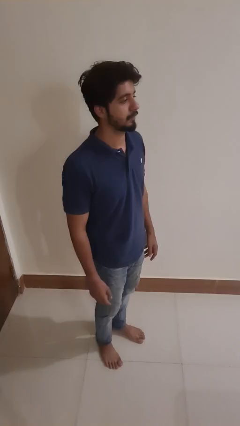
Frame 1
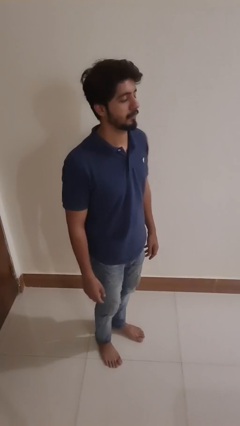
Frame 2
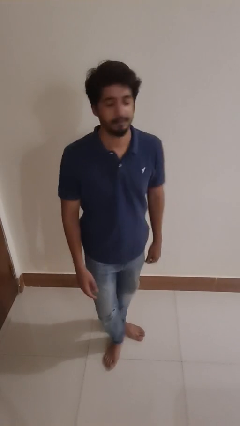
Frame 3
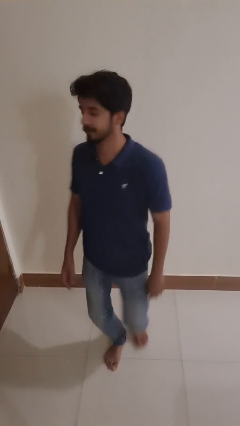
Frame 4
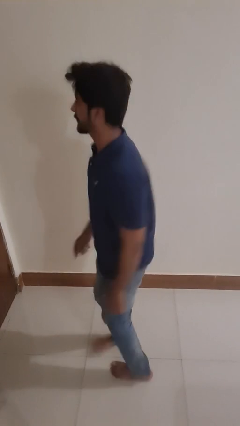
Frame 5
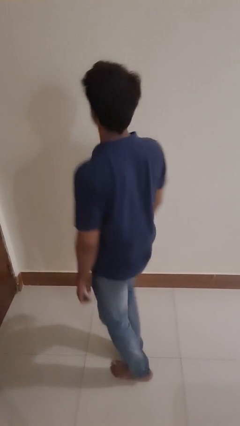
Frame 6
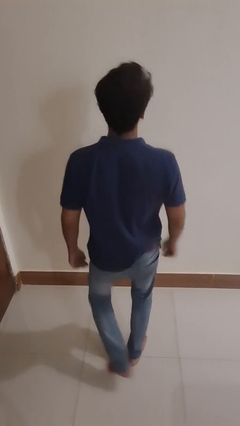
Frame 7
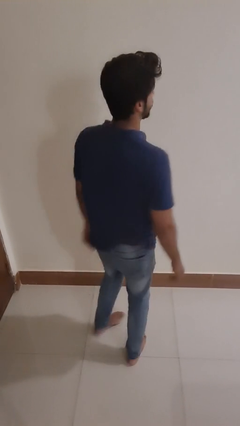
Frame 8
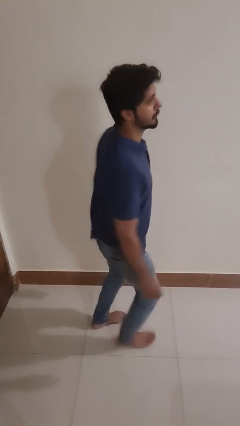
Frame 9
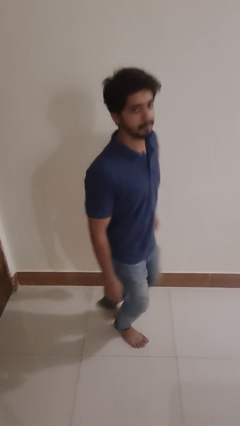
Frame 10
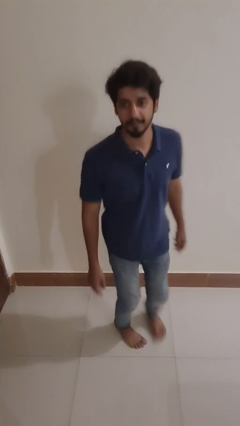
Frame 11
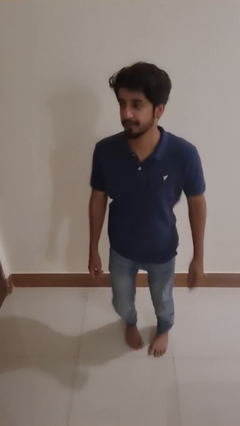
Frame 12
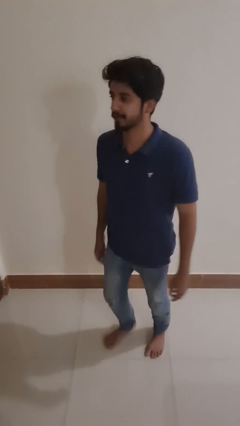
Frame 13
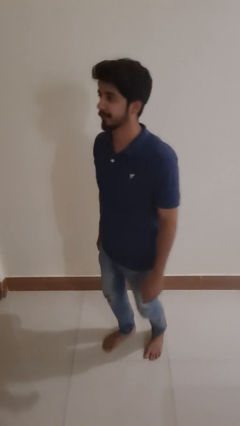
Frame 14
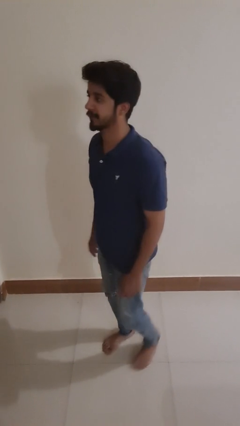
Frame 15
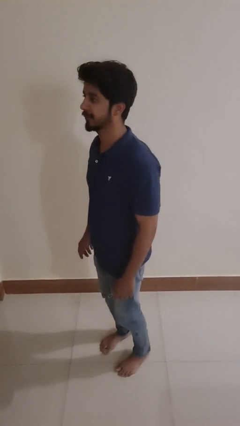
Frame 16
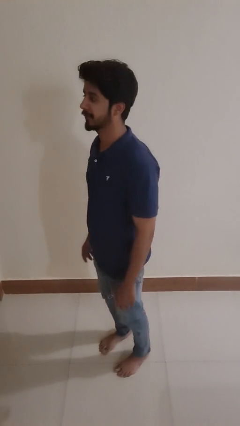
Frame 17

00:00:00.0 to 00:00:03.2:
person twirls

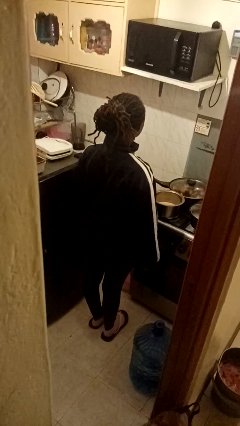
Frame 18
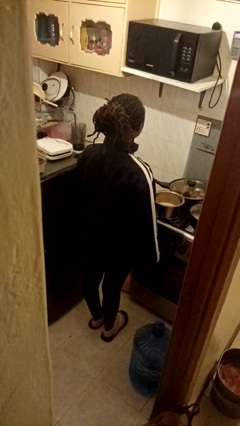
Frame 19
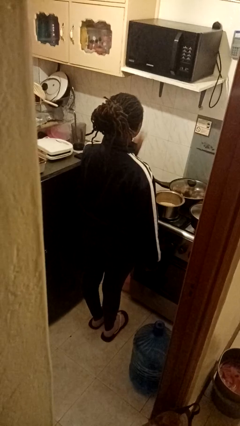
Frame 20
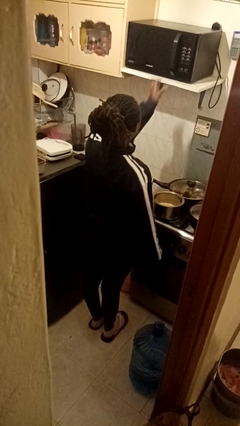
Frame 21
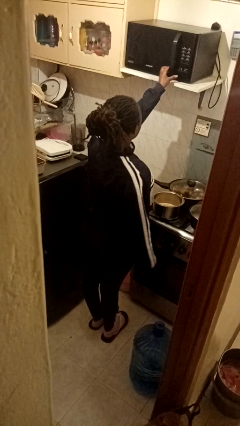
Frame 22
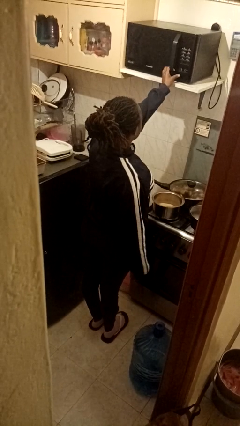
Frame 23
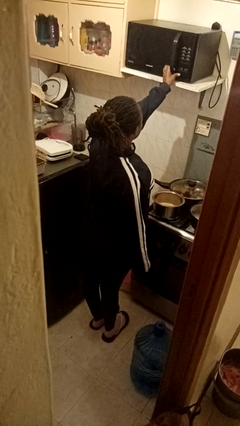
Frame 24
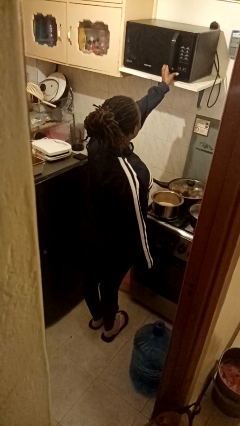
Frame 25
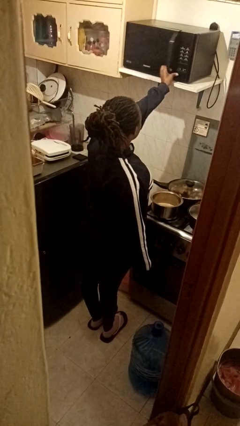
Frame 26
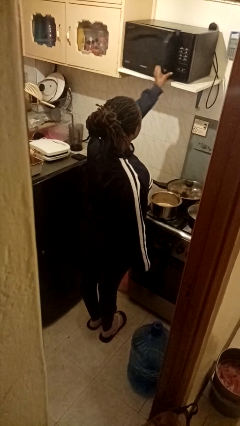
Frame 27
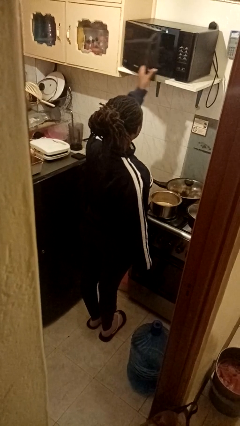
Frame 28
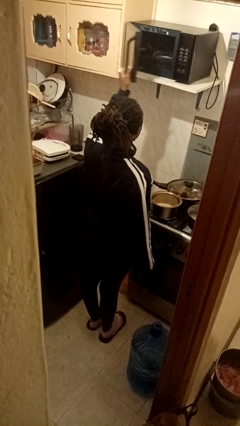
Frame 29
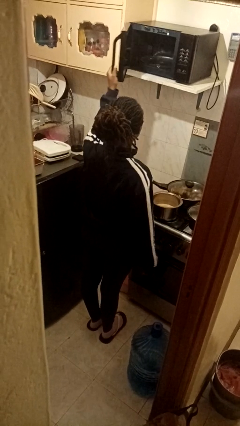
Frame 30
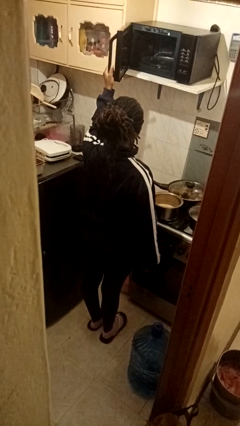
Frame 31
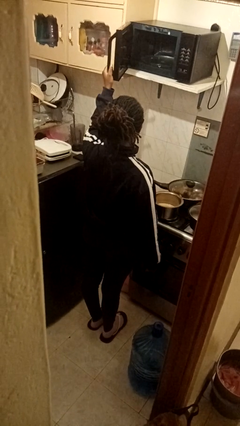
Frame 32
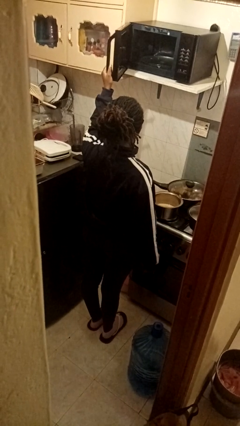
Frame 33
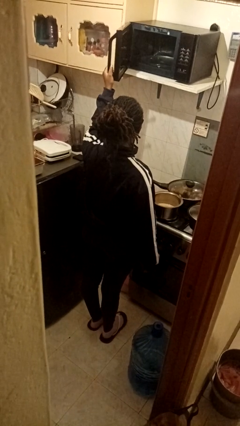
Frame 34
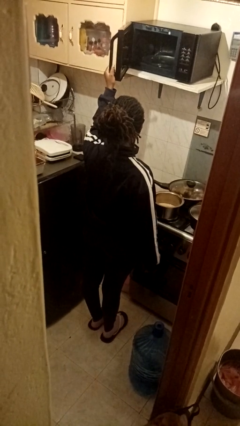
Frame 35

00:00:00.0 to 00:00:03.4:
person opens microwave

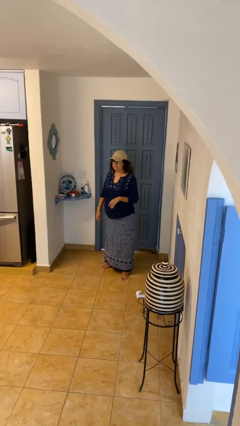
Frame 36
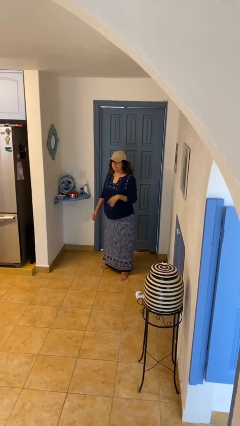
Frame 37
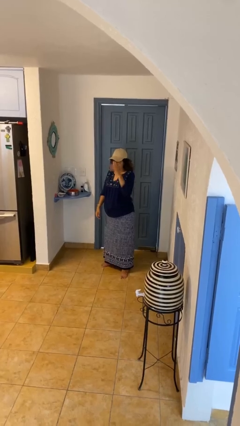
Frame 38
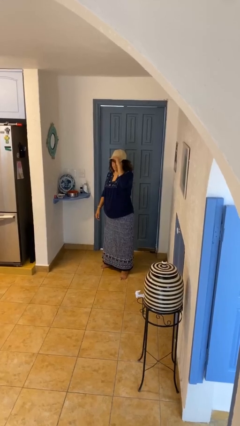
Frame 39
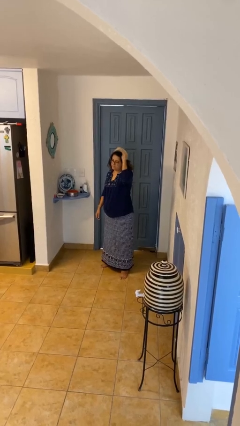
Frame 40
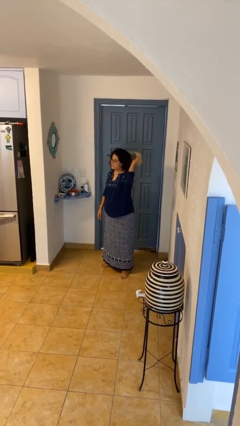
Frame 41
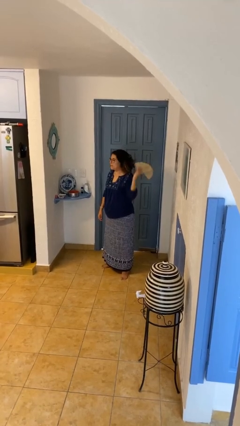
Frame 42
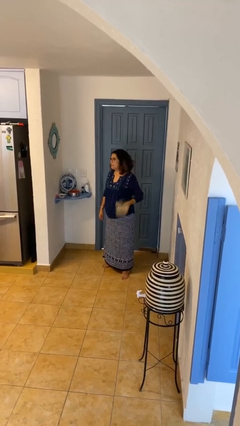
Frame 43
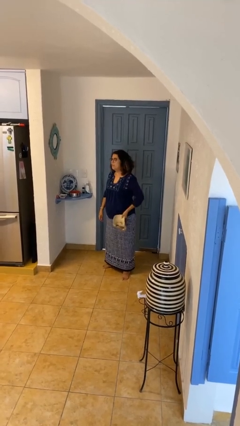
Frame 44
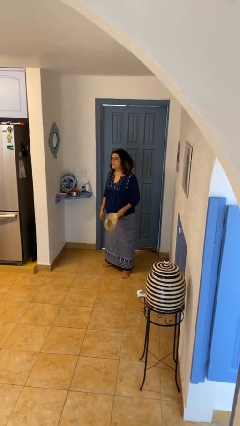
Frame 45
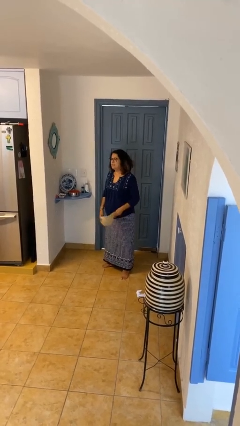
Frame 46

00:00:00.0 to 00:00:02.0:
person takes off hat

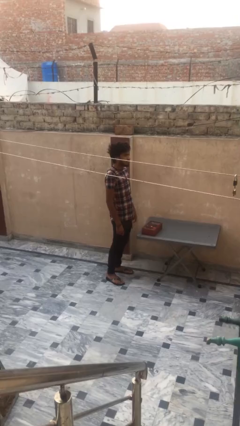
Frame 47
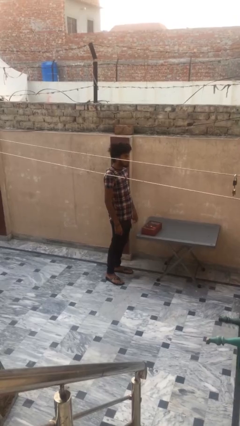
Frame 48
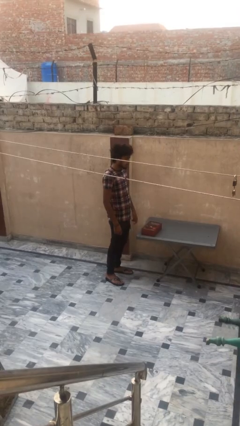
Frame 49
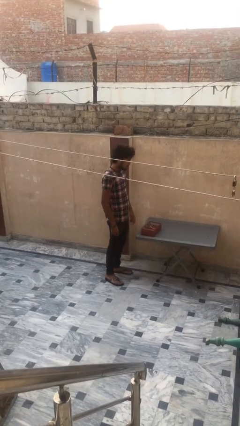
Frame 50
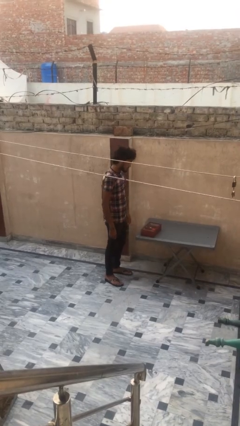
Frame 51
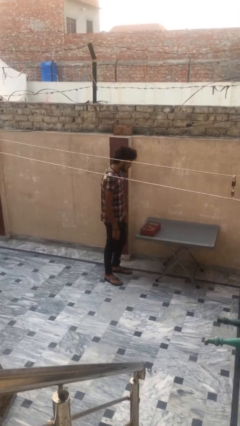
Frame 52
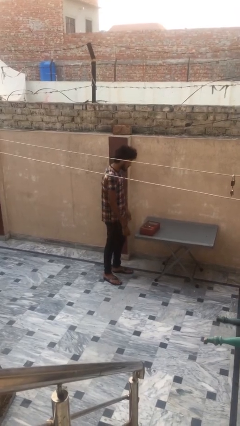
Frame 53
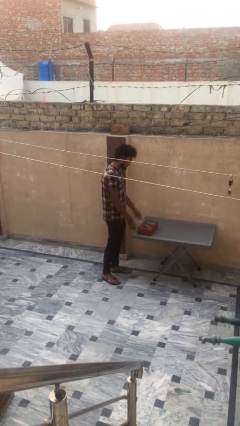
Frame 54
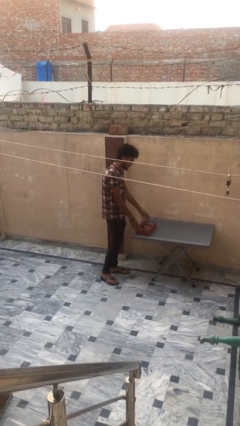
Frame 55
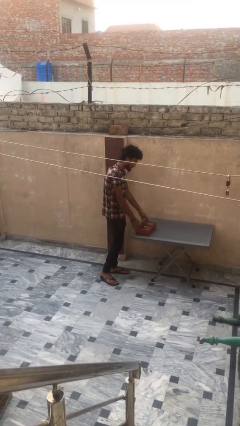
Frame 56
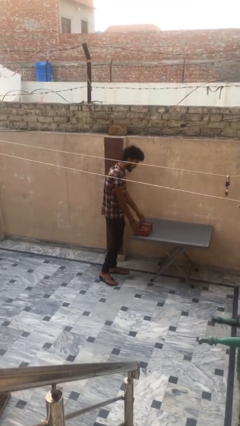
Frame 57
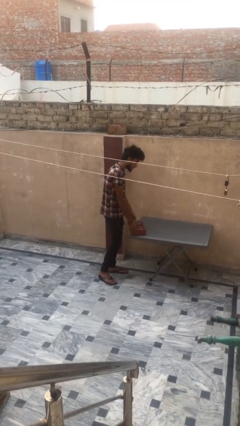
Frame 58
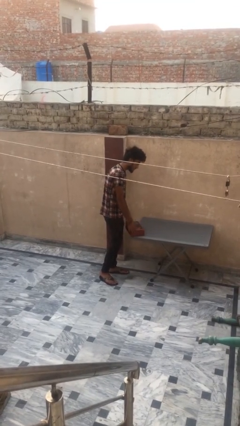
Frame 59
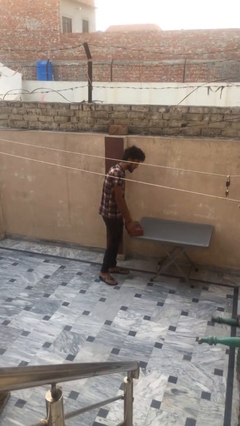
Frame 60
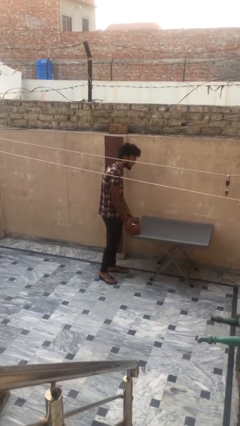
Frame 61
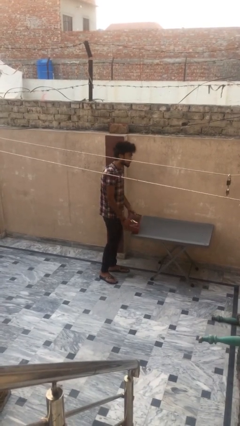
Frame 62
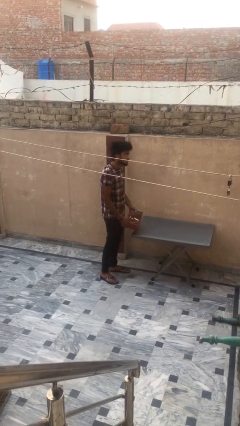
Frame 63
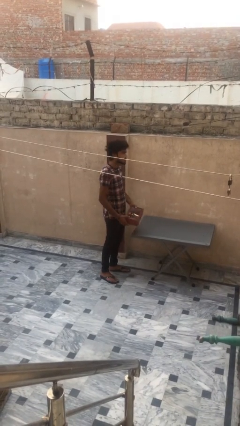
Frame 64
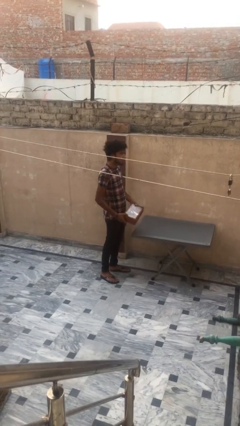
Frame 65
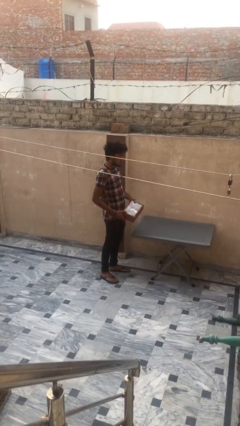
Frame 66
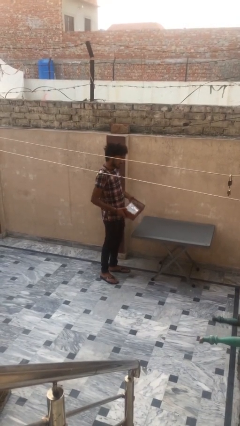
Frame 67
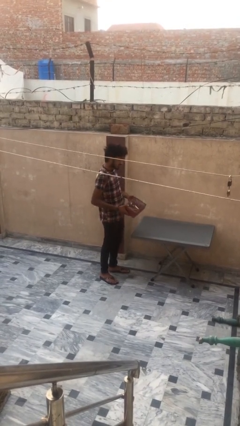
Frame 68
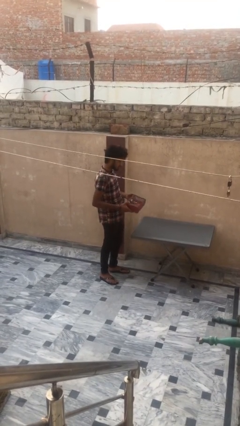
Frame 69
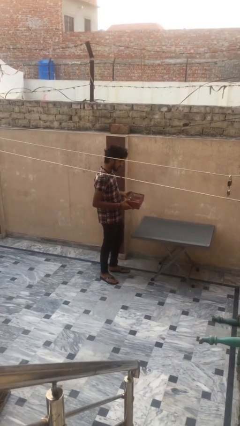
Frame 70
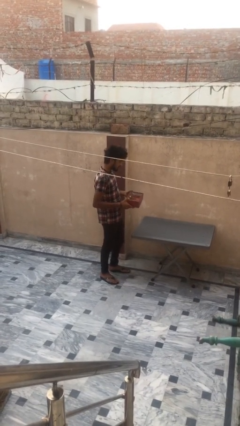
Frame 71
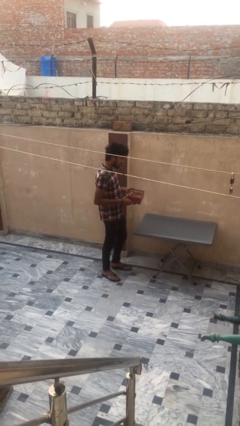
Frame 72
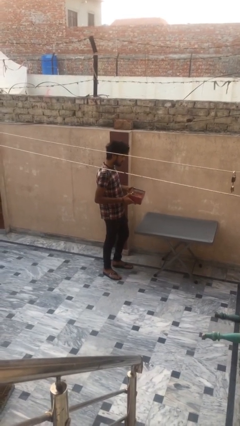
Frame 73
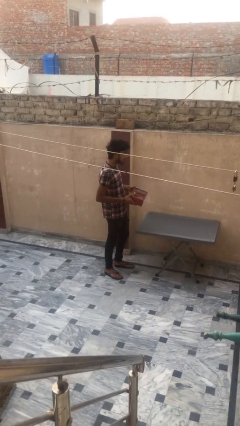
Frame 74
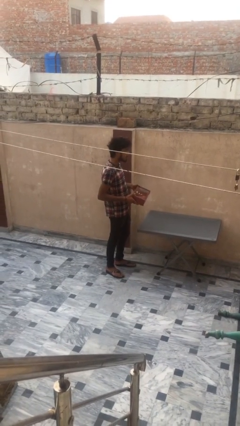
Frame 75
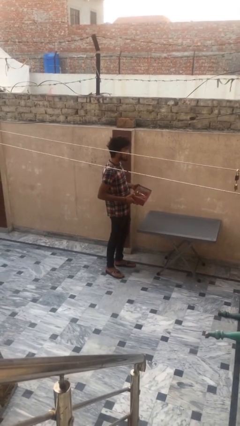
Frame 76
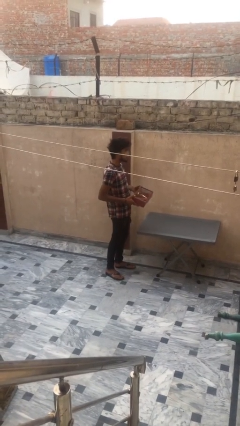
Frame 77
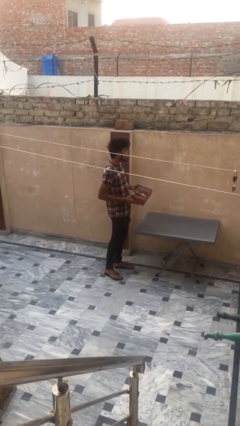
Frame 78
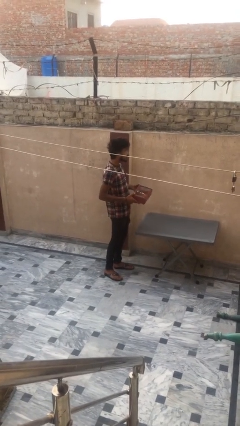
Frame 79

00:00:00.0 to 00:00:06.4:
person picks up object from table

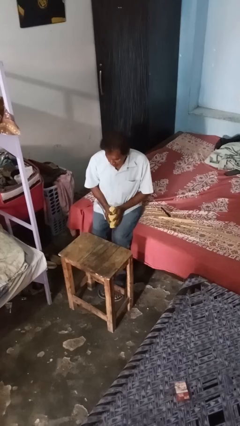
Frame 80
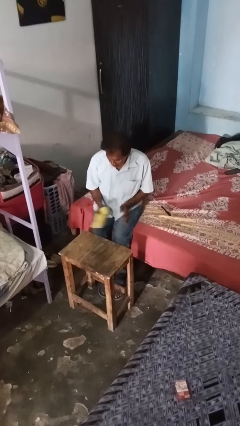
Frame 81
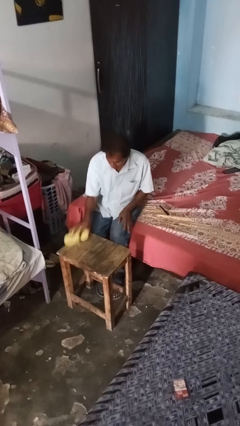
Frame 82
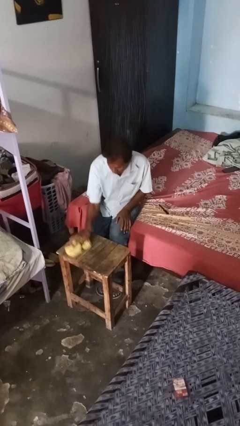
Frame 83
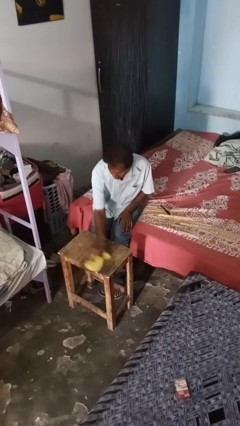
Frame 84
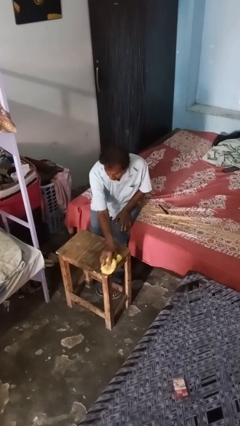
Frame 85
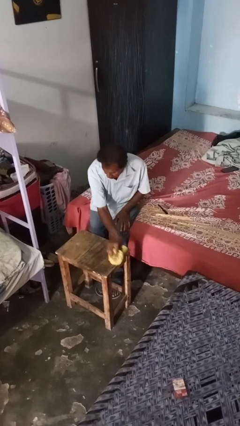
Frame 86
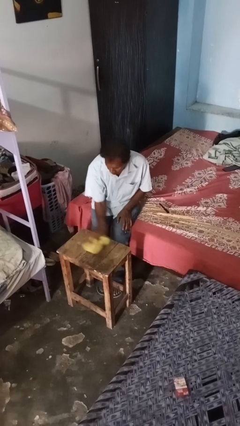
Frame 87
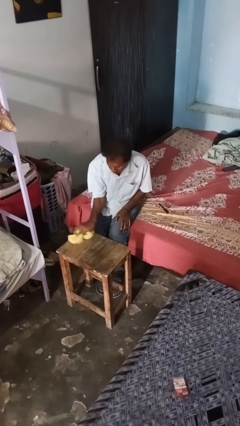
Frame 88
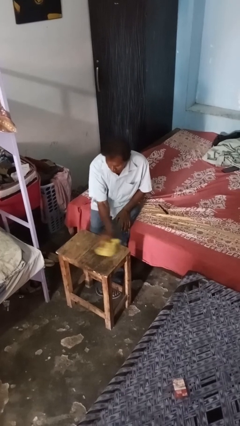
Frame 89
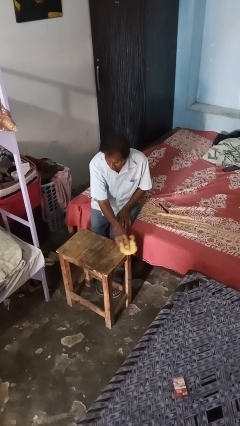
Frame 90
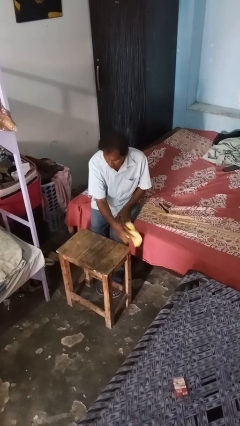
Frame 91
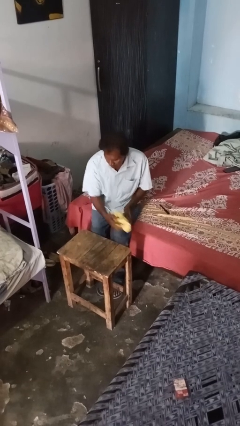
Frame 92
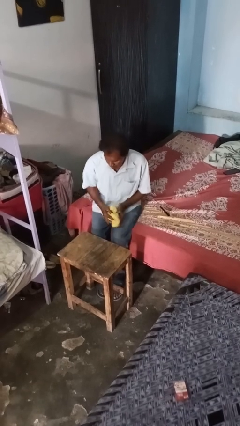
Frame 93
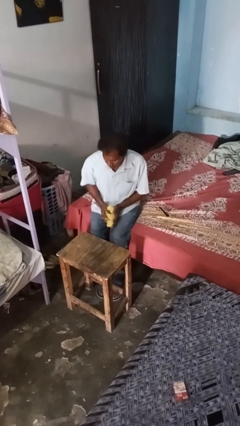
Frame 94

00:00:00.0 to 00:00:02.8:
person cleans table with rag
